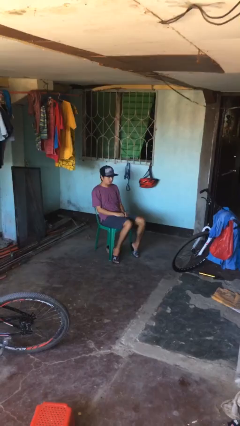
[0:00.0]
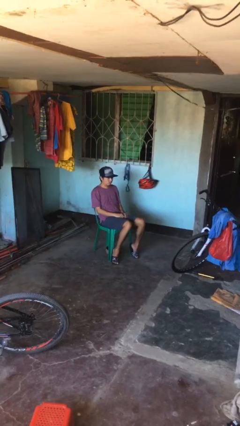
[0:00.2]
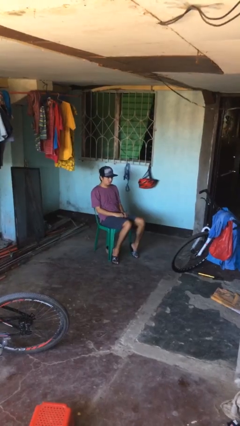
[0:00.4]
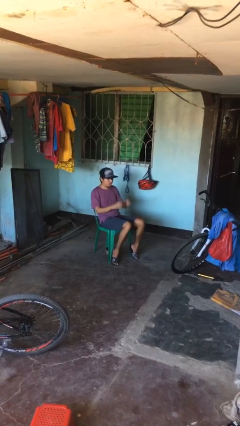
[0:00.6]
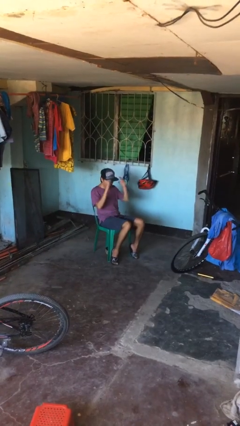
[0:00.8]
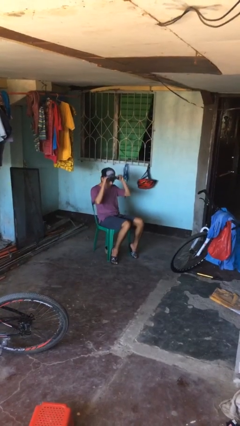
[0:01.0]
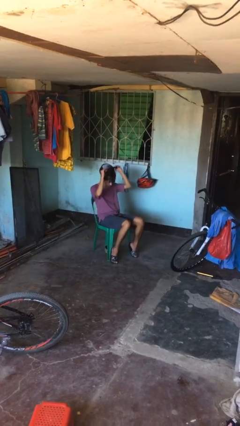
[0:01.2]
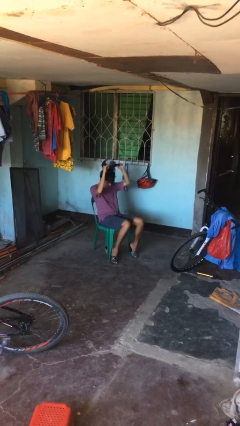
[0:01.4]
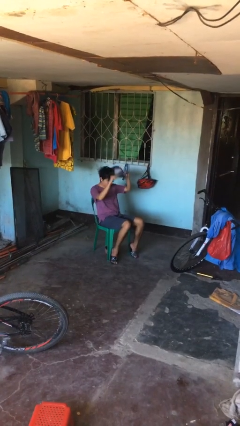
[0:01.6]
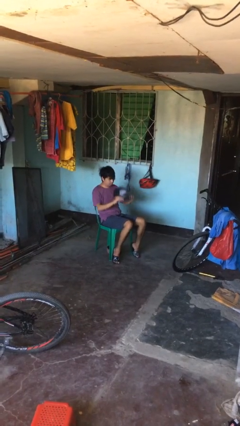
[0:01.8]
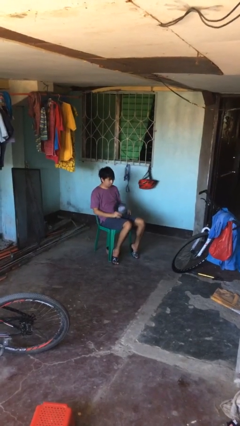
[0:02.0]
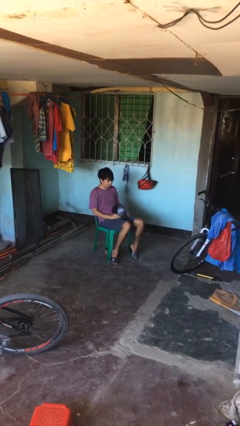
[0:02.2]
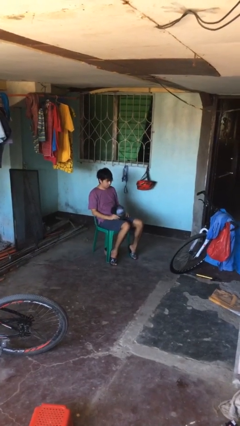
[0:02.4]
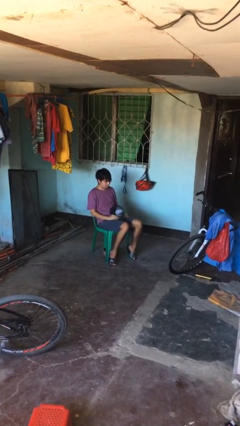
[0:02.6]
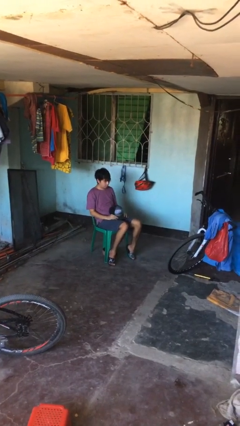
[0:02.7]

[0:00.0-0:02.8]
person takes off hat

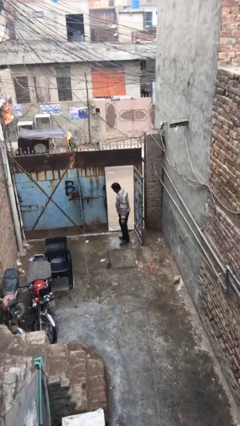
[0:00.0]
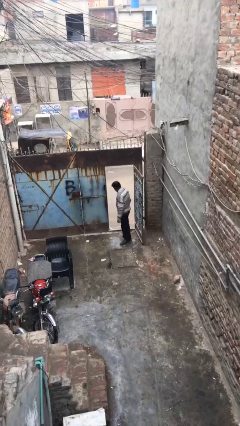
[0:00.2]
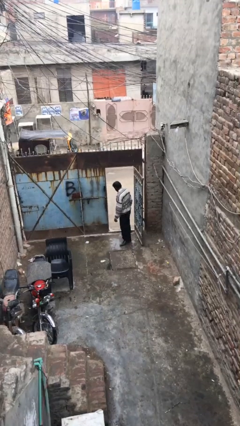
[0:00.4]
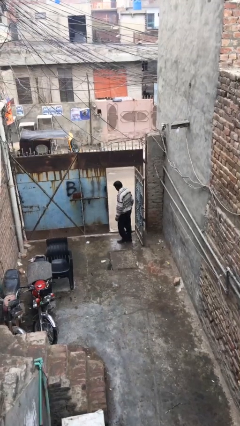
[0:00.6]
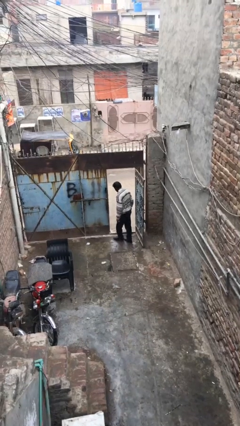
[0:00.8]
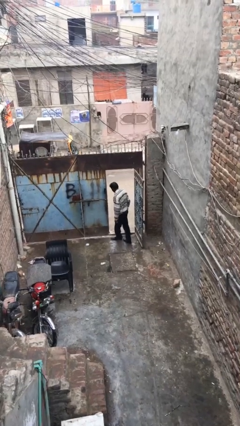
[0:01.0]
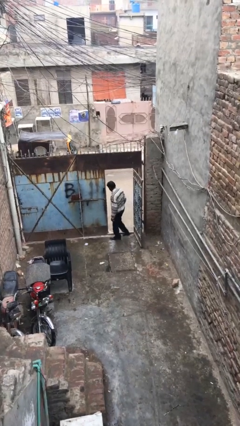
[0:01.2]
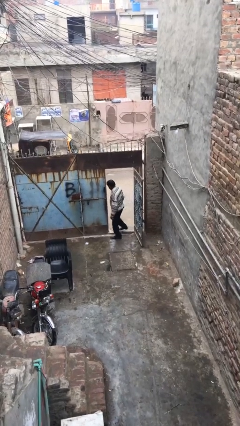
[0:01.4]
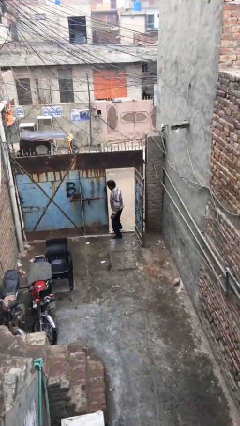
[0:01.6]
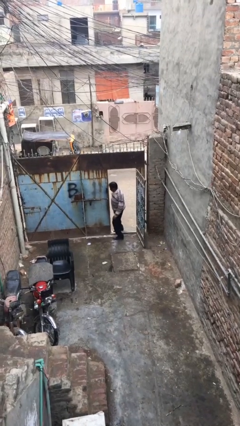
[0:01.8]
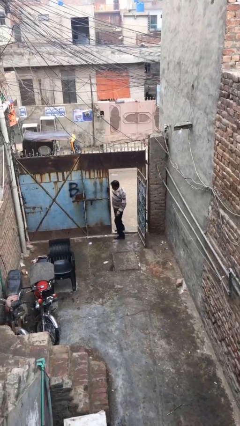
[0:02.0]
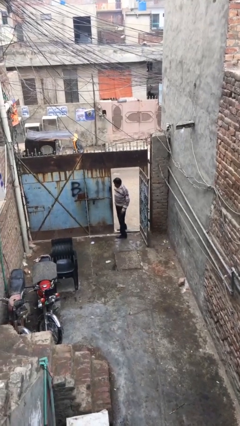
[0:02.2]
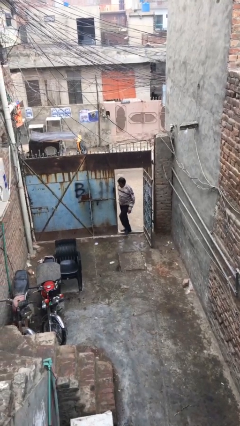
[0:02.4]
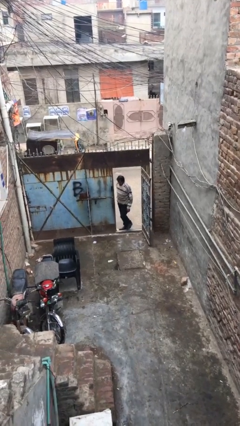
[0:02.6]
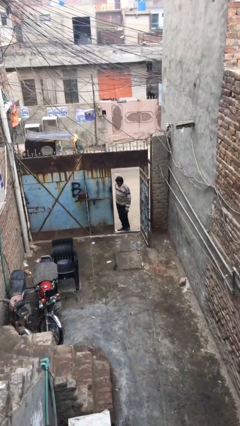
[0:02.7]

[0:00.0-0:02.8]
person exits scene through structure

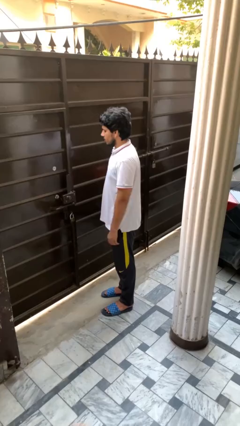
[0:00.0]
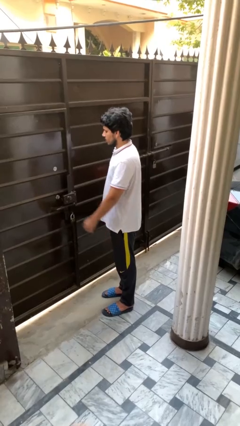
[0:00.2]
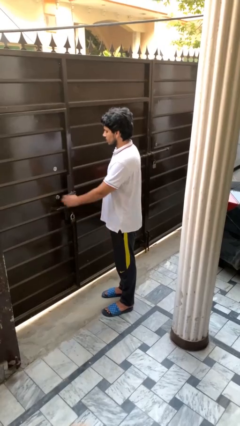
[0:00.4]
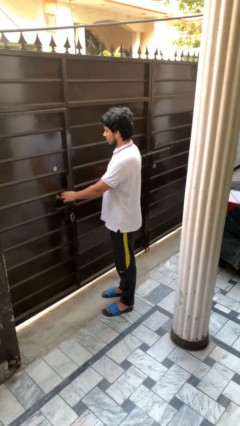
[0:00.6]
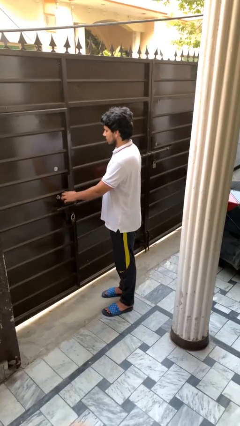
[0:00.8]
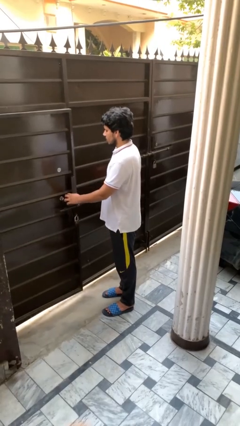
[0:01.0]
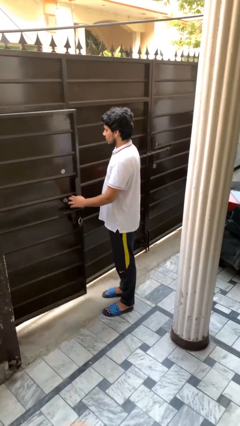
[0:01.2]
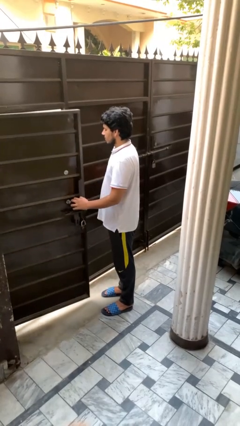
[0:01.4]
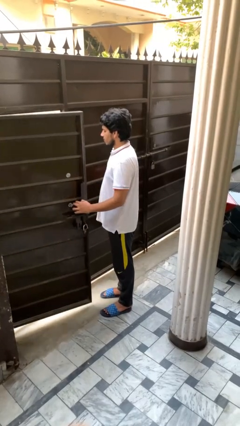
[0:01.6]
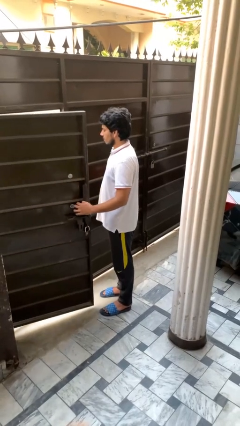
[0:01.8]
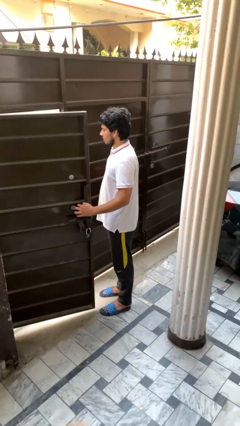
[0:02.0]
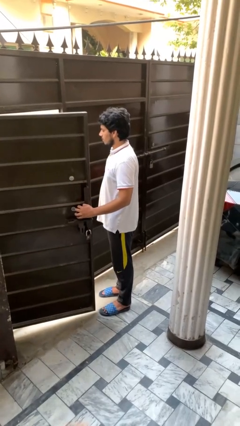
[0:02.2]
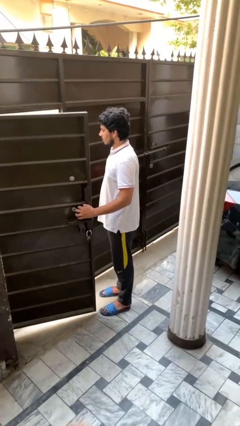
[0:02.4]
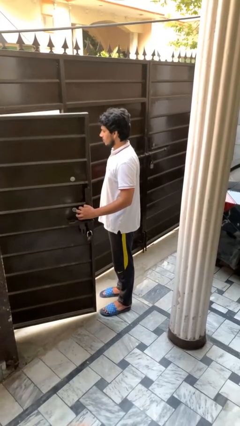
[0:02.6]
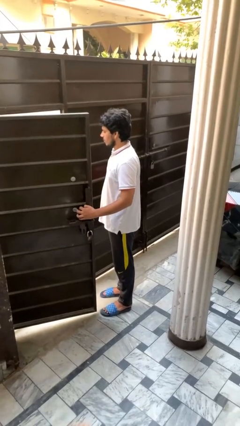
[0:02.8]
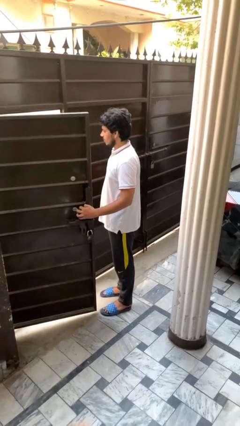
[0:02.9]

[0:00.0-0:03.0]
person opens gate

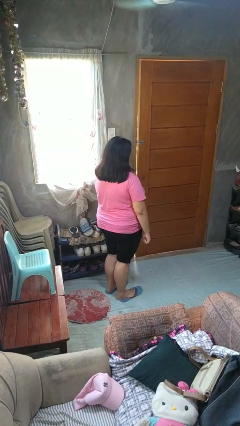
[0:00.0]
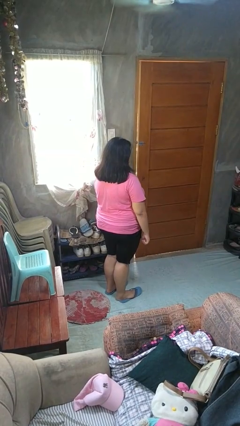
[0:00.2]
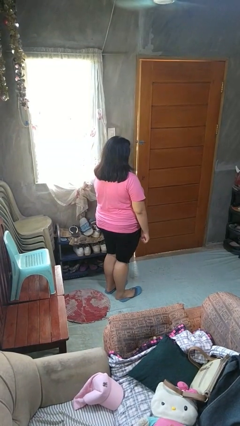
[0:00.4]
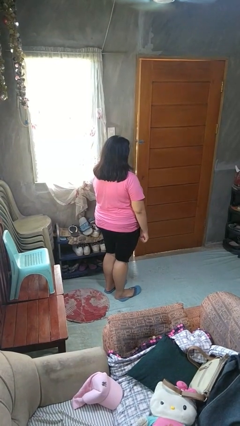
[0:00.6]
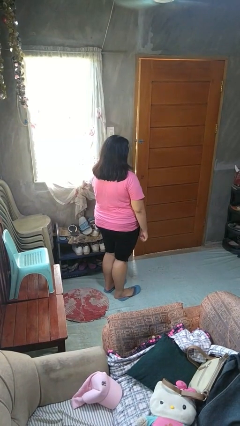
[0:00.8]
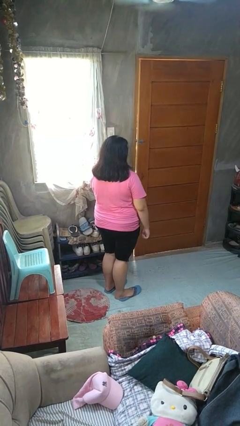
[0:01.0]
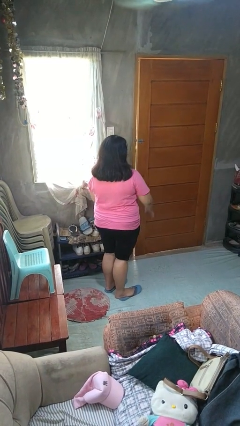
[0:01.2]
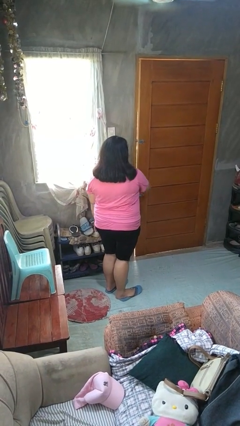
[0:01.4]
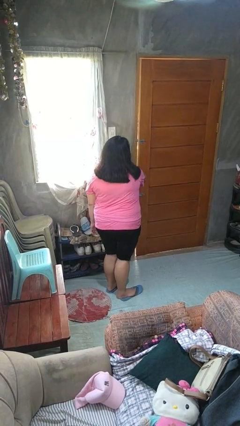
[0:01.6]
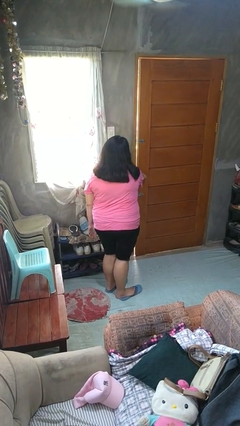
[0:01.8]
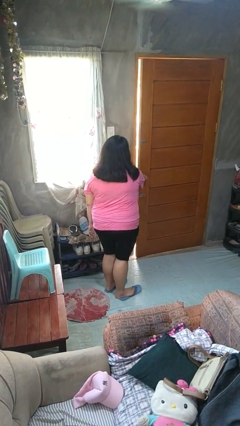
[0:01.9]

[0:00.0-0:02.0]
person opens facility door

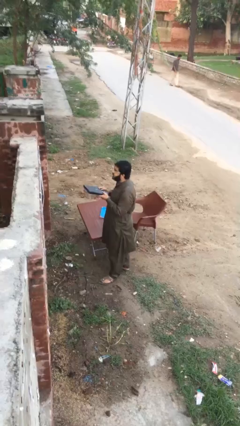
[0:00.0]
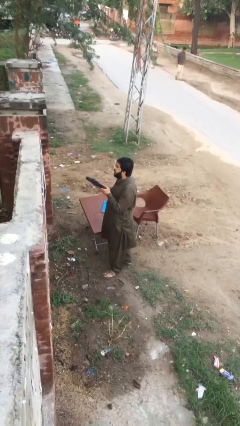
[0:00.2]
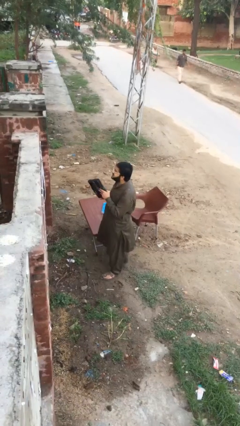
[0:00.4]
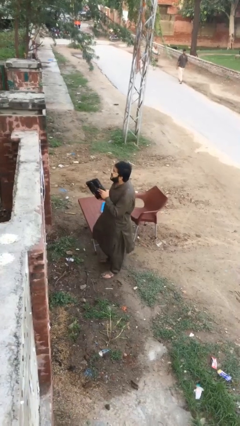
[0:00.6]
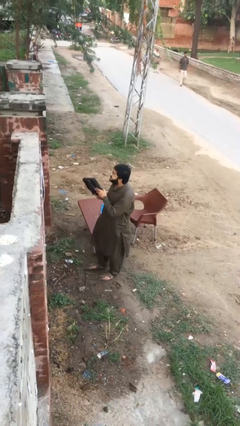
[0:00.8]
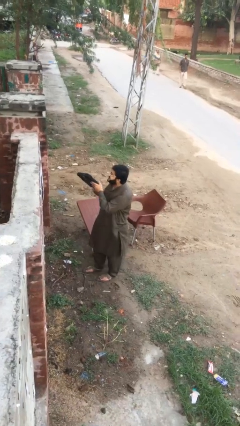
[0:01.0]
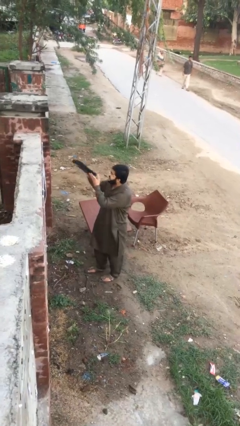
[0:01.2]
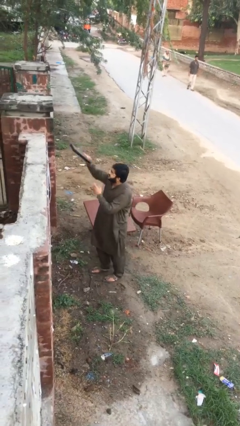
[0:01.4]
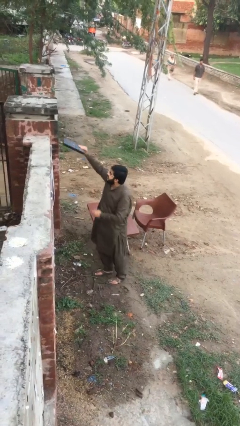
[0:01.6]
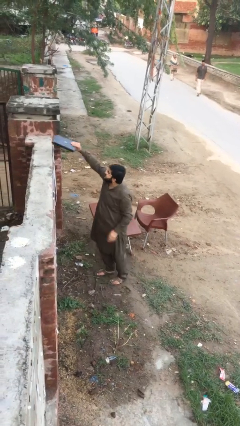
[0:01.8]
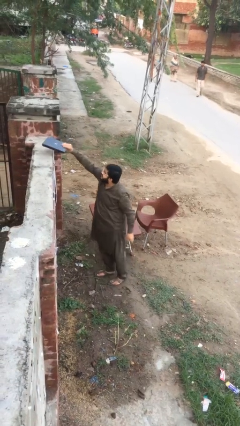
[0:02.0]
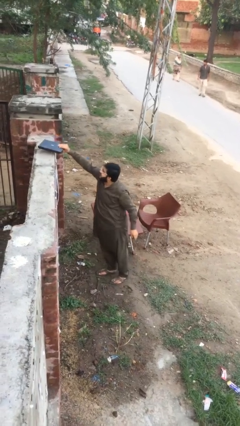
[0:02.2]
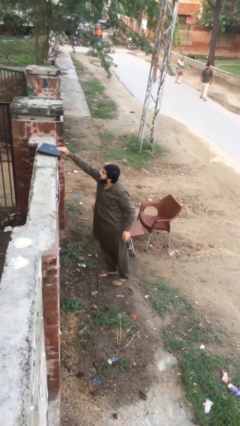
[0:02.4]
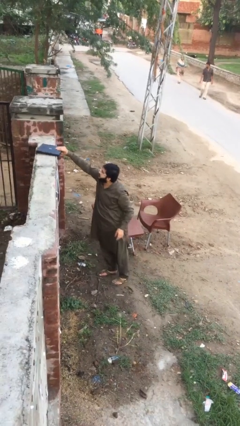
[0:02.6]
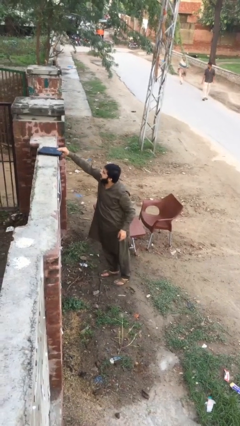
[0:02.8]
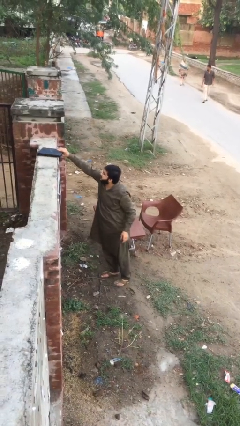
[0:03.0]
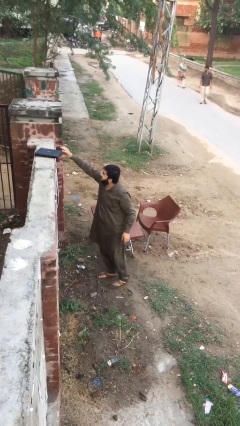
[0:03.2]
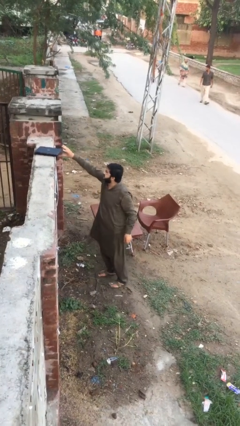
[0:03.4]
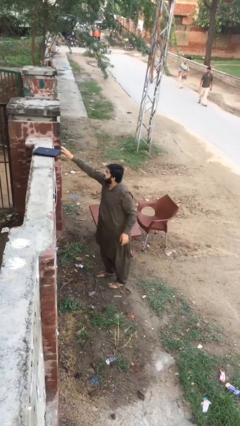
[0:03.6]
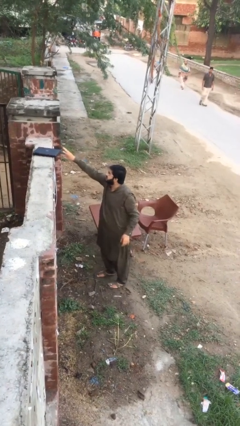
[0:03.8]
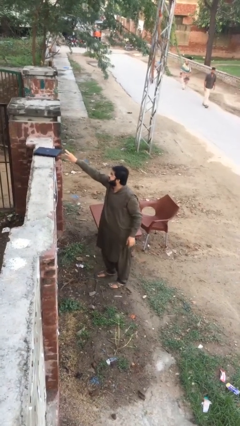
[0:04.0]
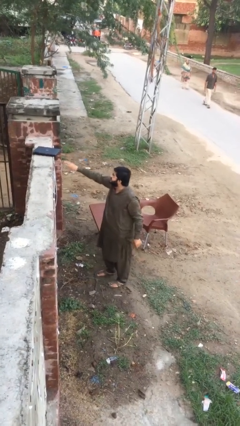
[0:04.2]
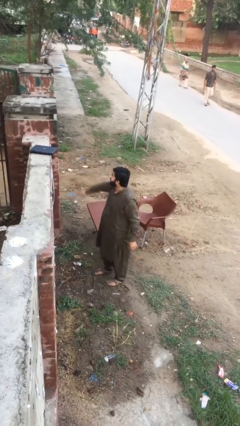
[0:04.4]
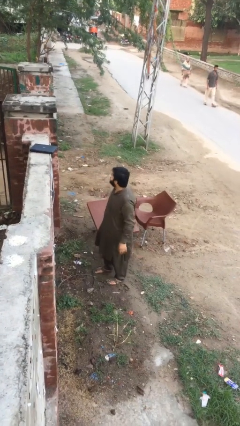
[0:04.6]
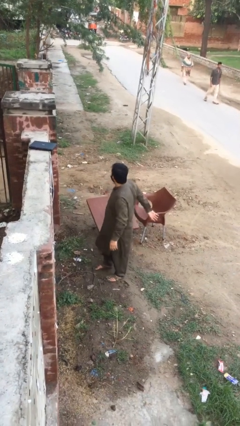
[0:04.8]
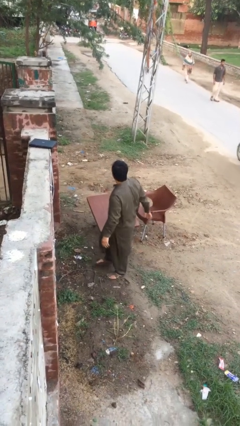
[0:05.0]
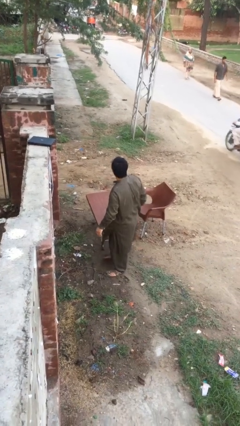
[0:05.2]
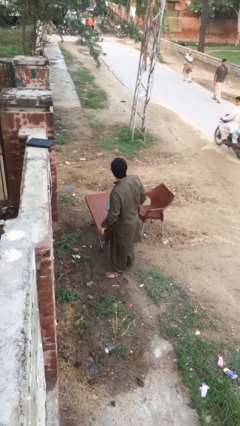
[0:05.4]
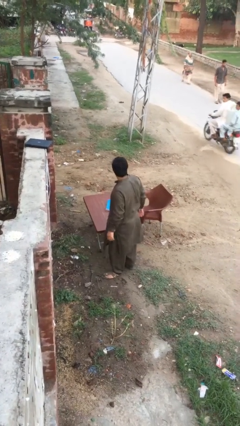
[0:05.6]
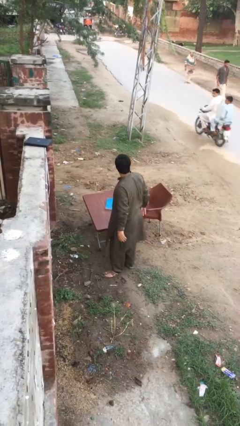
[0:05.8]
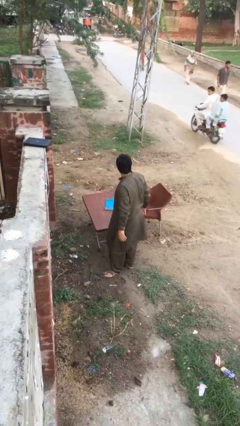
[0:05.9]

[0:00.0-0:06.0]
person puts down object on shelf

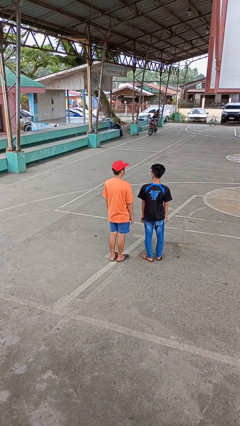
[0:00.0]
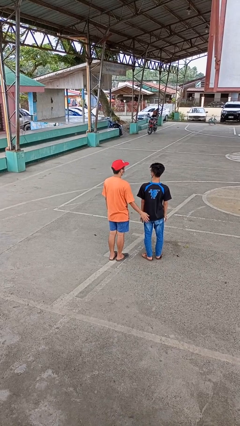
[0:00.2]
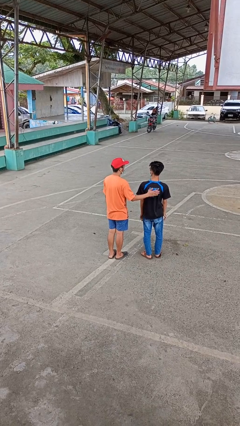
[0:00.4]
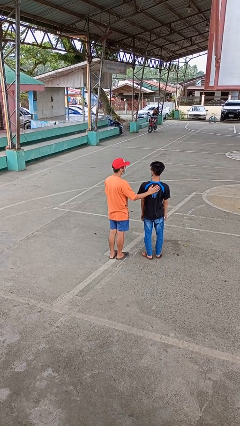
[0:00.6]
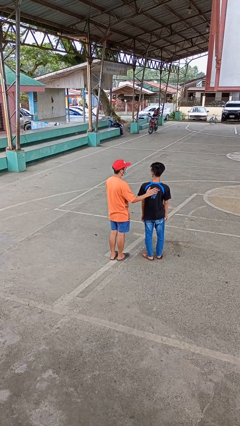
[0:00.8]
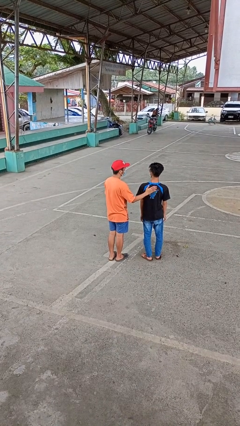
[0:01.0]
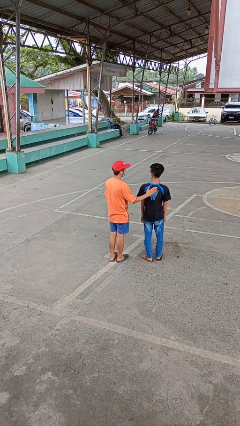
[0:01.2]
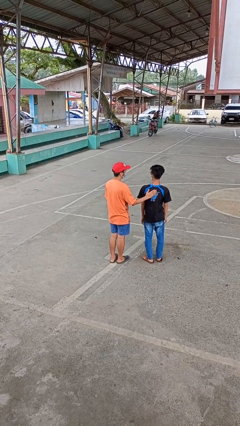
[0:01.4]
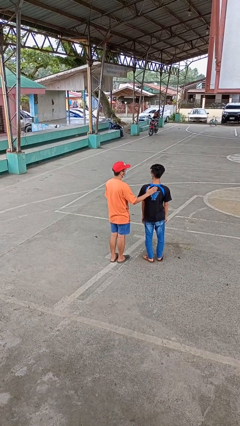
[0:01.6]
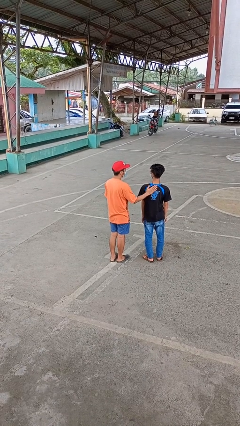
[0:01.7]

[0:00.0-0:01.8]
person touches back of person
